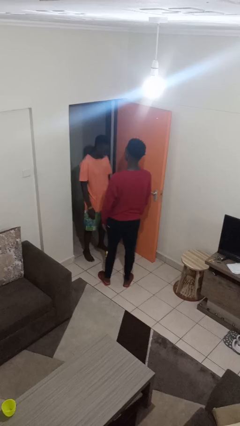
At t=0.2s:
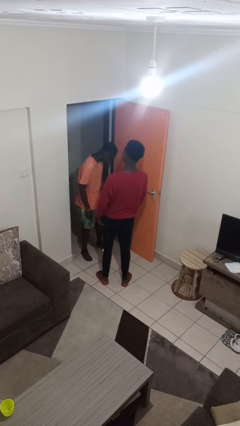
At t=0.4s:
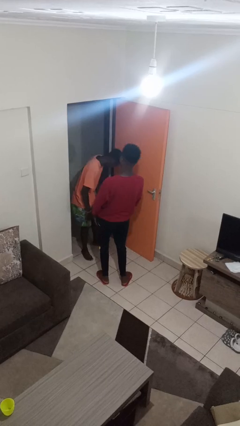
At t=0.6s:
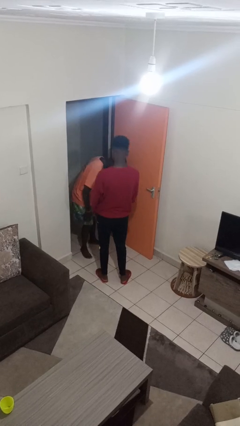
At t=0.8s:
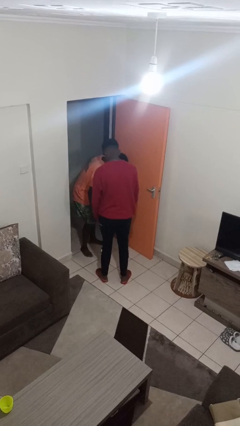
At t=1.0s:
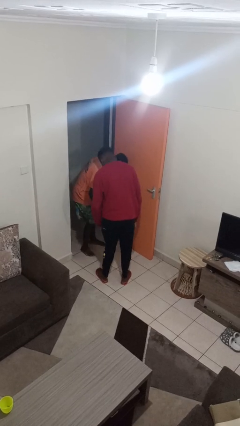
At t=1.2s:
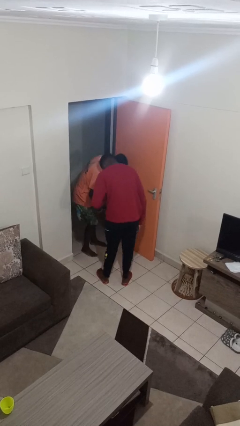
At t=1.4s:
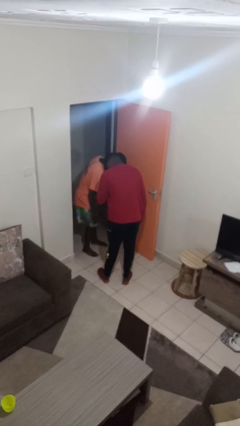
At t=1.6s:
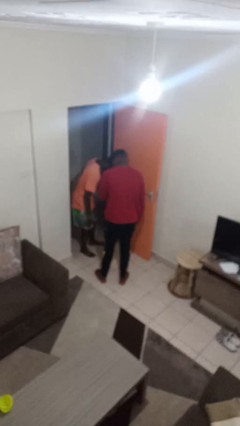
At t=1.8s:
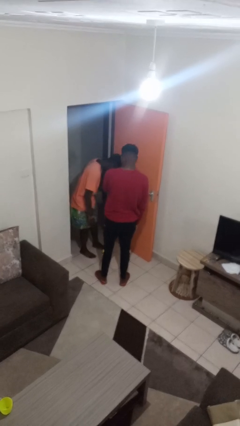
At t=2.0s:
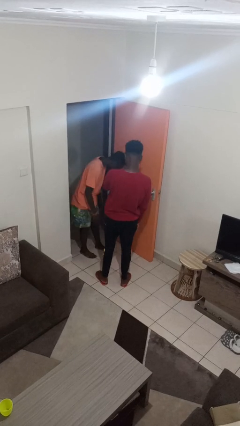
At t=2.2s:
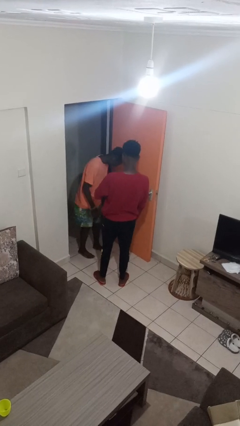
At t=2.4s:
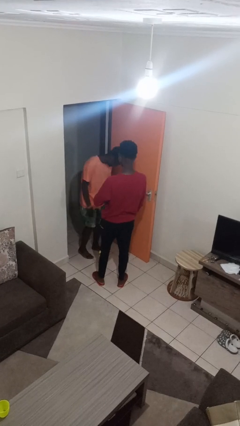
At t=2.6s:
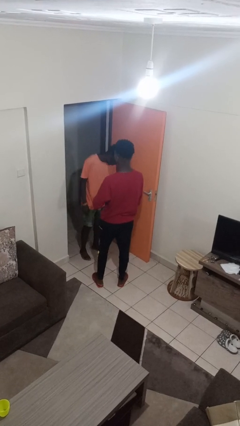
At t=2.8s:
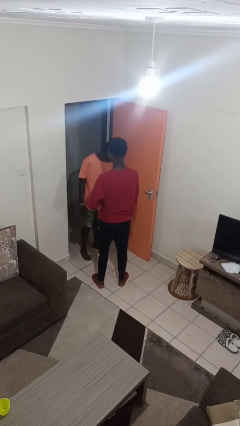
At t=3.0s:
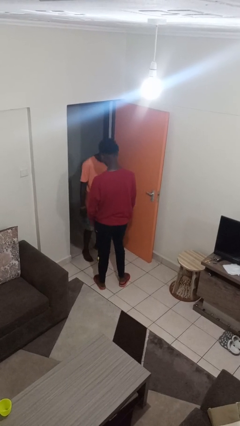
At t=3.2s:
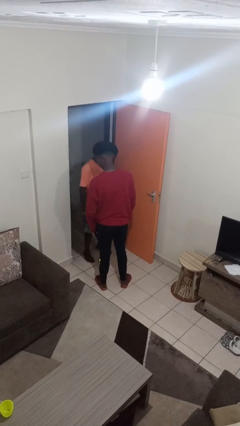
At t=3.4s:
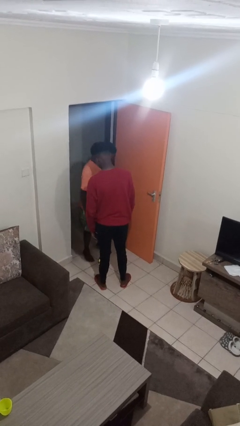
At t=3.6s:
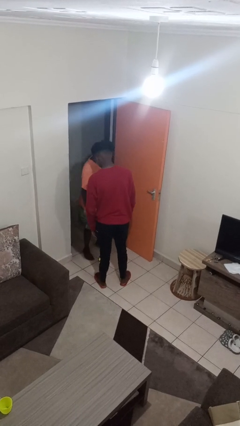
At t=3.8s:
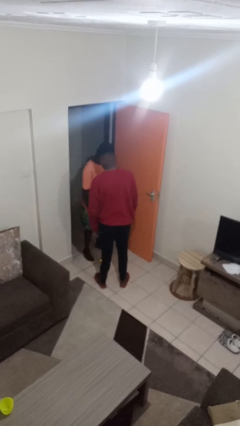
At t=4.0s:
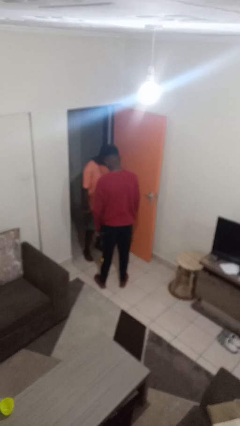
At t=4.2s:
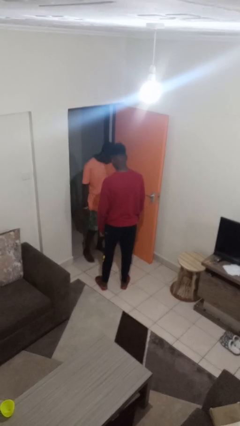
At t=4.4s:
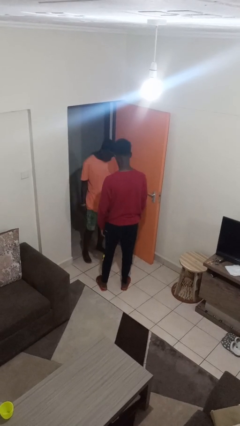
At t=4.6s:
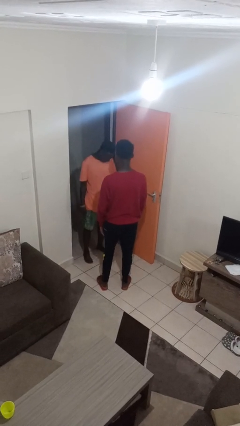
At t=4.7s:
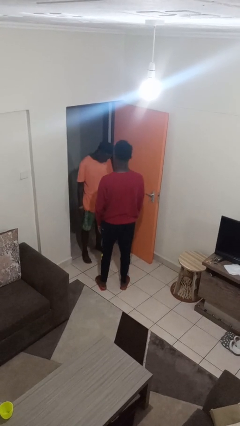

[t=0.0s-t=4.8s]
person laughs with person

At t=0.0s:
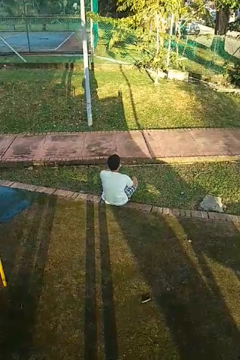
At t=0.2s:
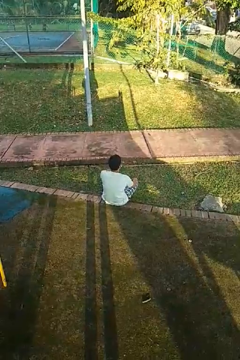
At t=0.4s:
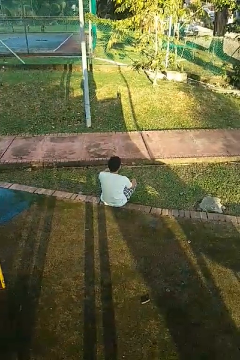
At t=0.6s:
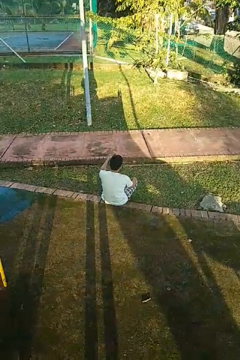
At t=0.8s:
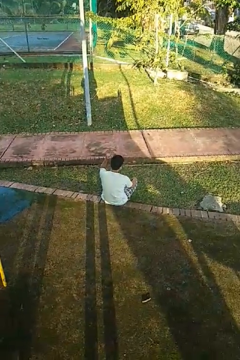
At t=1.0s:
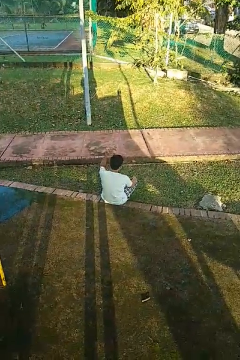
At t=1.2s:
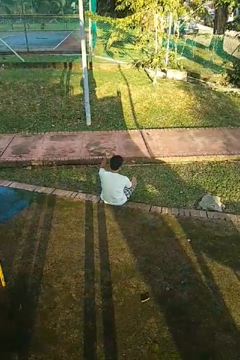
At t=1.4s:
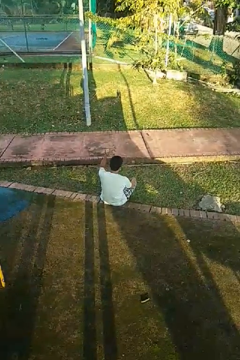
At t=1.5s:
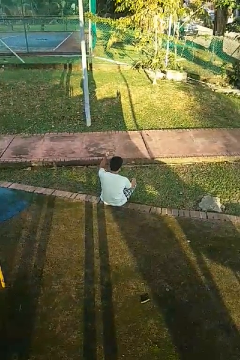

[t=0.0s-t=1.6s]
person gestures behind me

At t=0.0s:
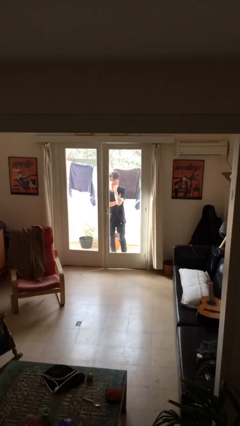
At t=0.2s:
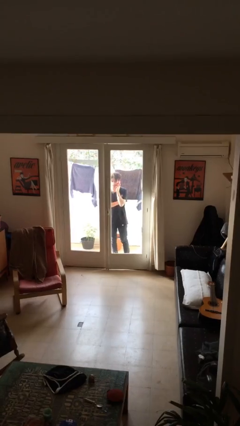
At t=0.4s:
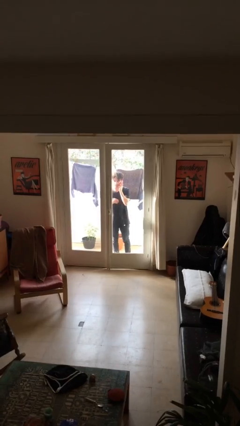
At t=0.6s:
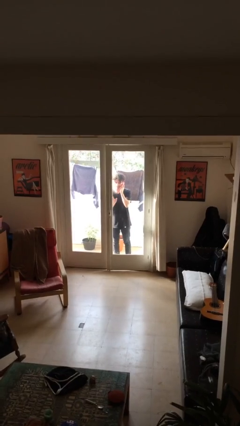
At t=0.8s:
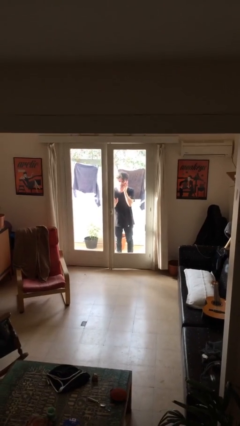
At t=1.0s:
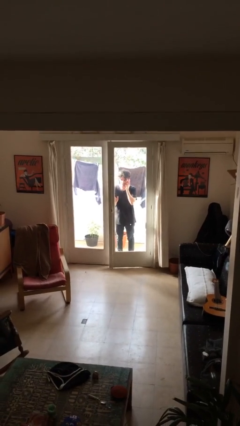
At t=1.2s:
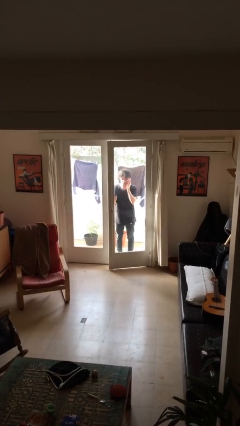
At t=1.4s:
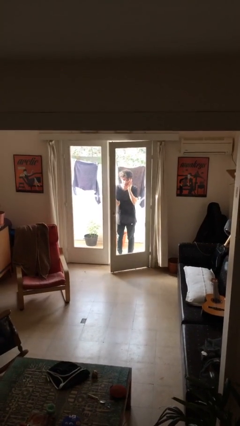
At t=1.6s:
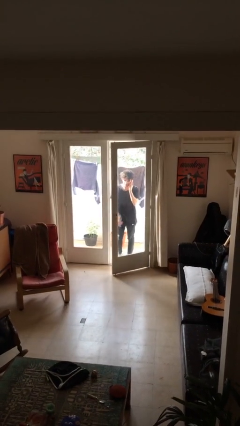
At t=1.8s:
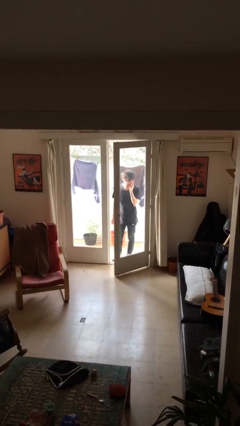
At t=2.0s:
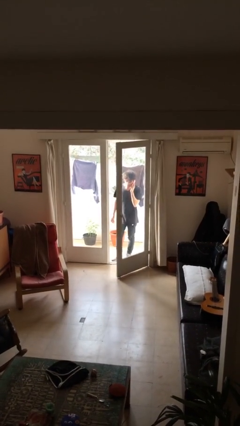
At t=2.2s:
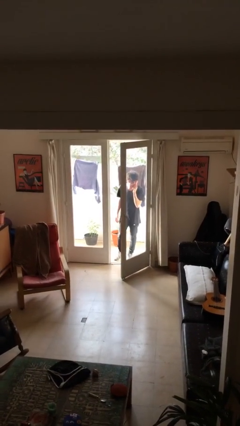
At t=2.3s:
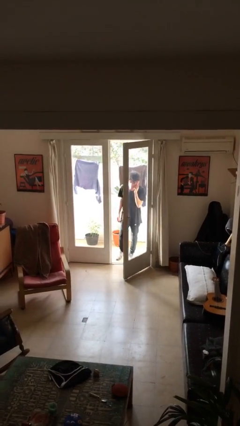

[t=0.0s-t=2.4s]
person opens facility door

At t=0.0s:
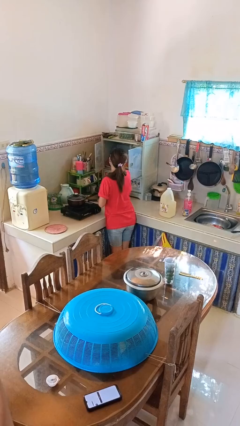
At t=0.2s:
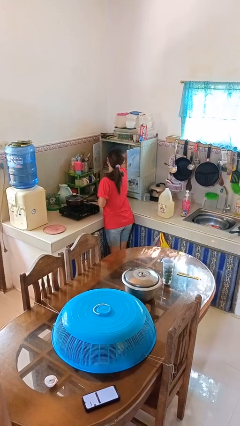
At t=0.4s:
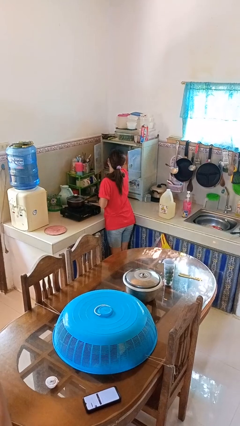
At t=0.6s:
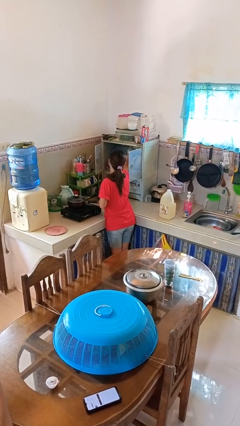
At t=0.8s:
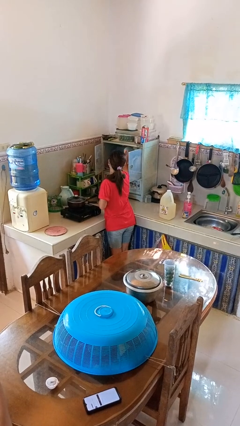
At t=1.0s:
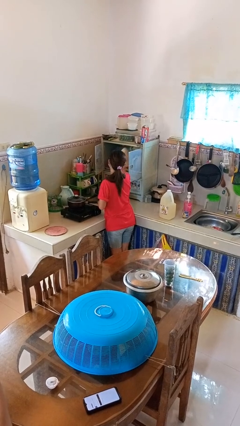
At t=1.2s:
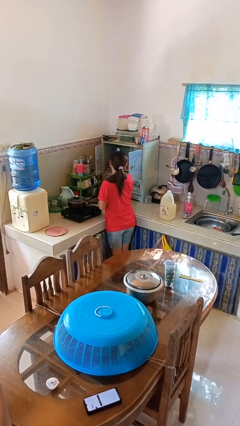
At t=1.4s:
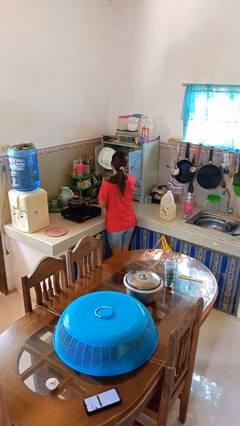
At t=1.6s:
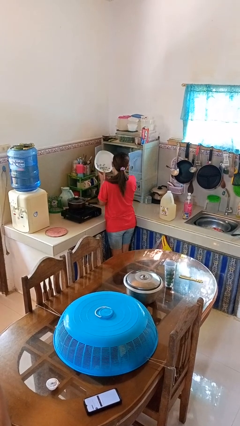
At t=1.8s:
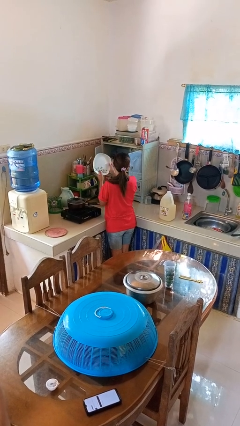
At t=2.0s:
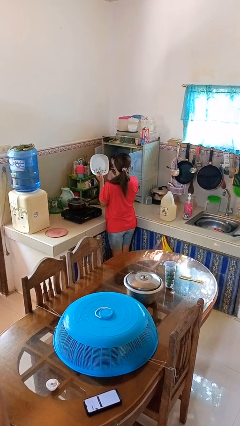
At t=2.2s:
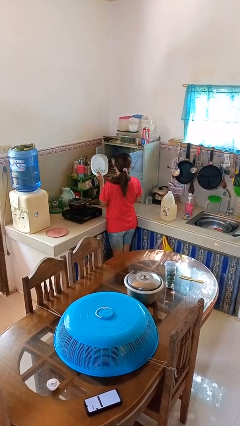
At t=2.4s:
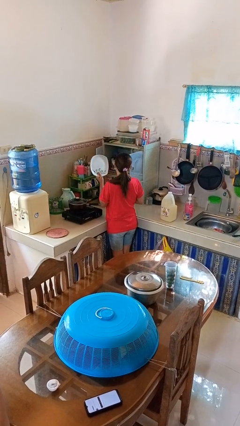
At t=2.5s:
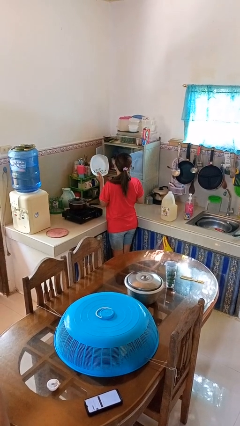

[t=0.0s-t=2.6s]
person takes object from cabinet

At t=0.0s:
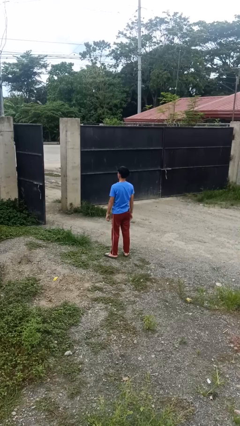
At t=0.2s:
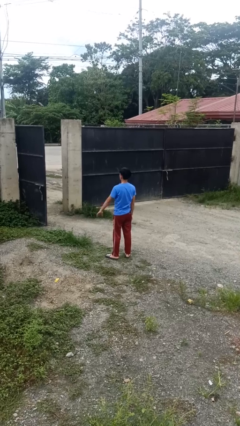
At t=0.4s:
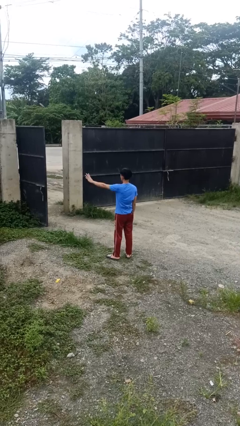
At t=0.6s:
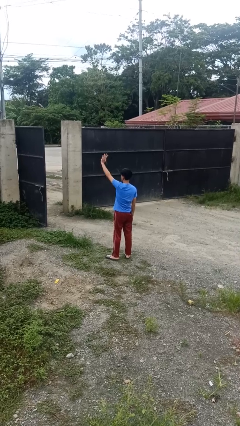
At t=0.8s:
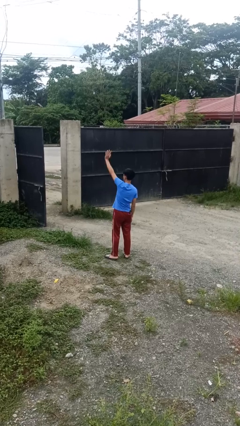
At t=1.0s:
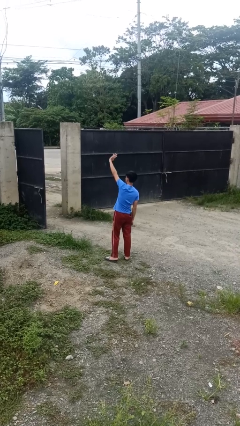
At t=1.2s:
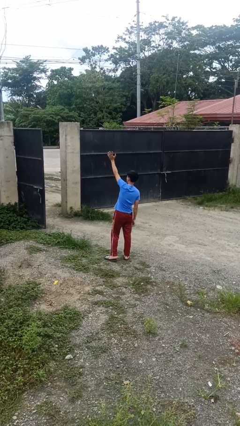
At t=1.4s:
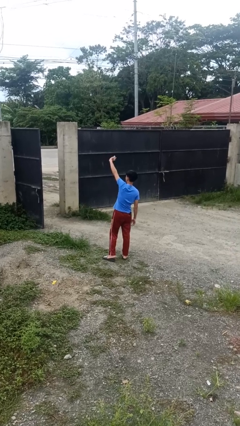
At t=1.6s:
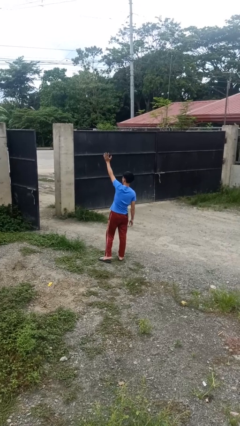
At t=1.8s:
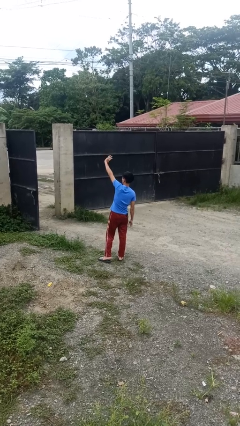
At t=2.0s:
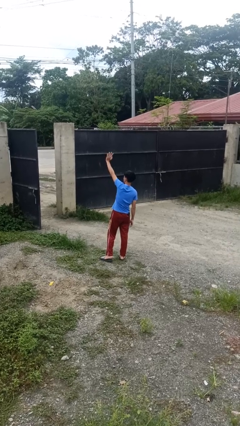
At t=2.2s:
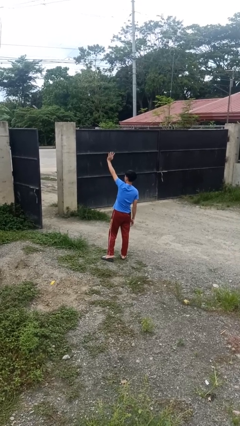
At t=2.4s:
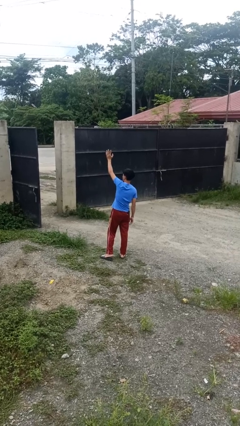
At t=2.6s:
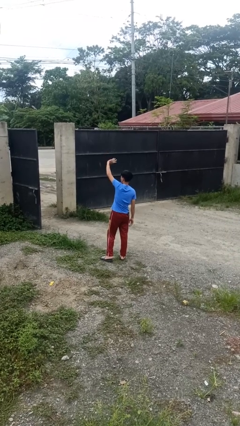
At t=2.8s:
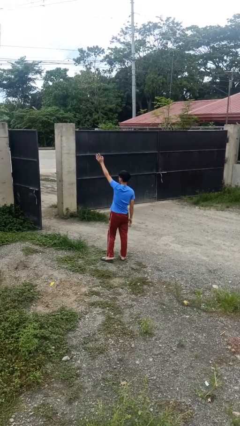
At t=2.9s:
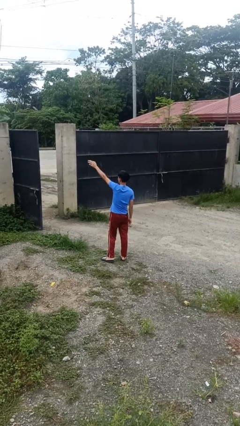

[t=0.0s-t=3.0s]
person waves at person

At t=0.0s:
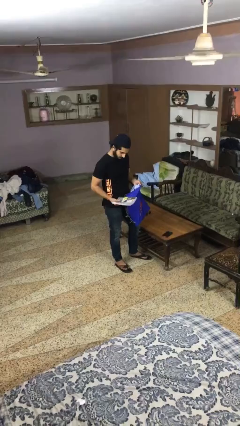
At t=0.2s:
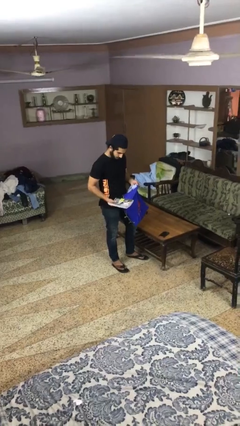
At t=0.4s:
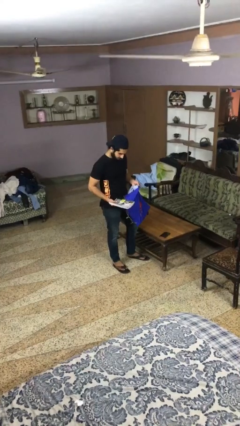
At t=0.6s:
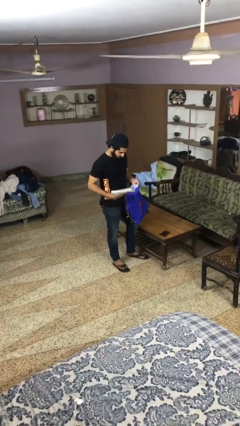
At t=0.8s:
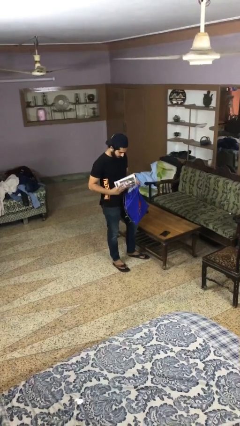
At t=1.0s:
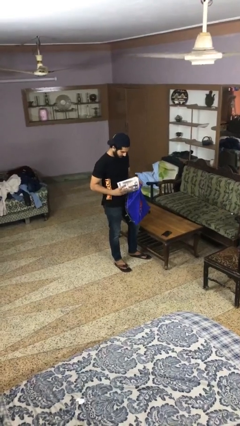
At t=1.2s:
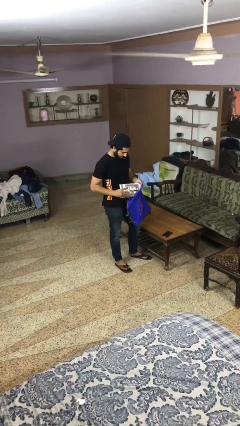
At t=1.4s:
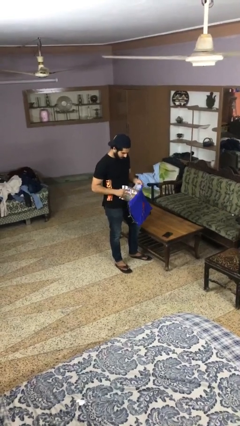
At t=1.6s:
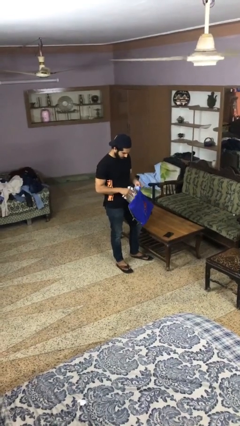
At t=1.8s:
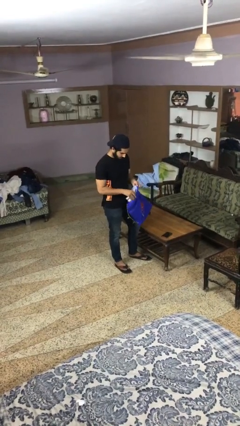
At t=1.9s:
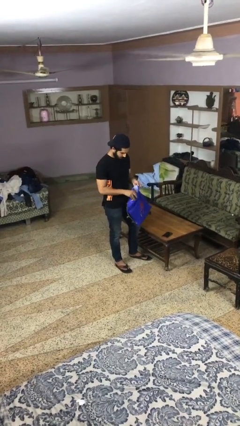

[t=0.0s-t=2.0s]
person puts object into bag

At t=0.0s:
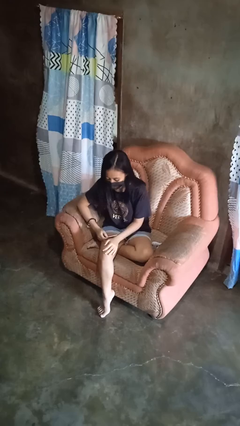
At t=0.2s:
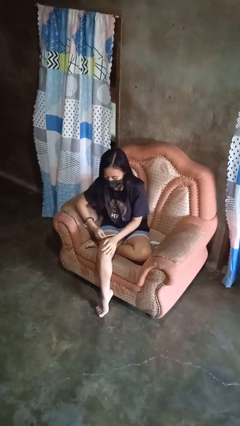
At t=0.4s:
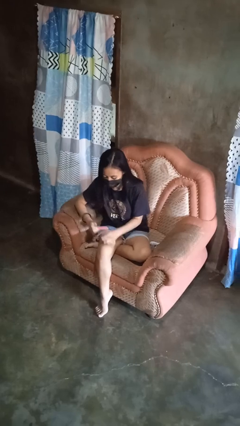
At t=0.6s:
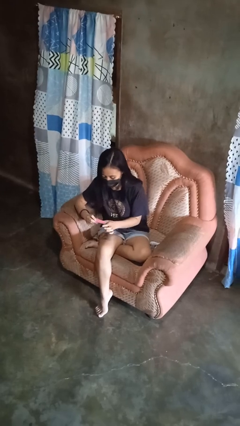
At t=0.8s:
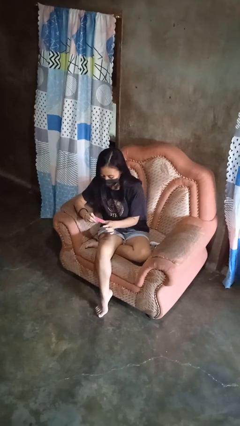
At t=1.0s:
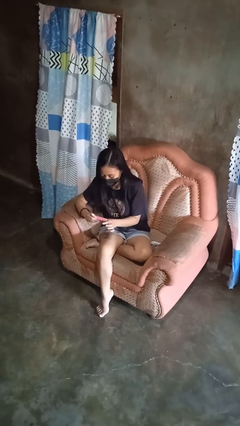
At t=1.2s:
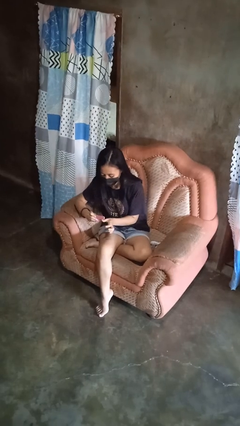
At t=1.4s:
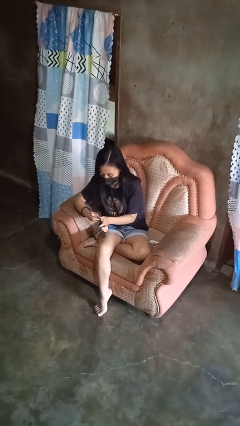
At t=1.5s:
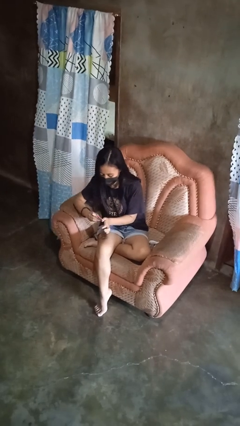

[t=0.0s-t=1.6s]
person files fingernails
